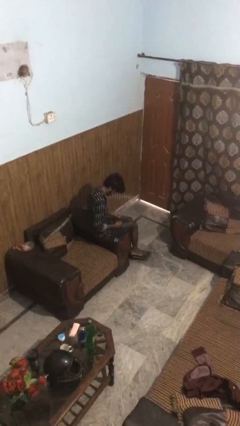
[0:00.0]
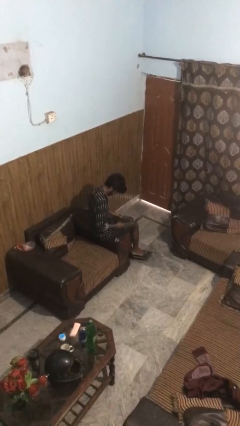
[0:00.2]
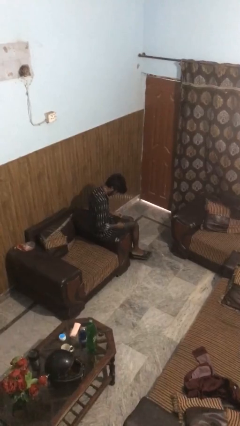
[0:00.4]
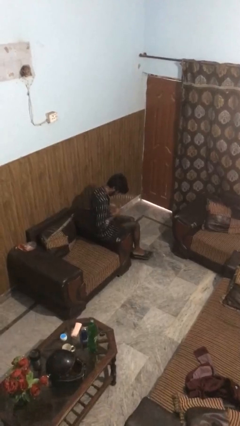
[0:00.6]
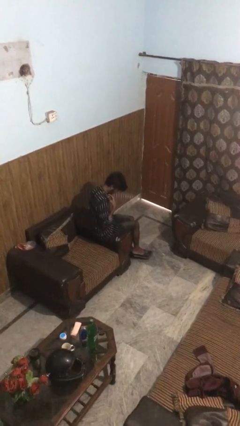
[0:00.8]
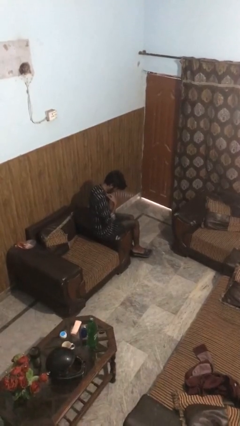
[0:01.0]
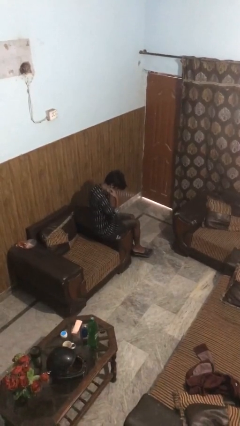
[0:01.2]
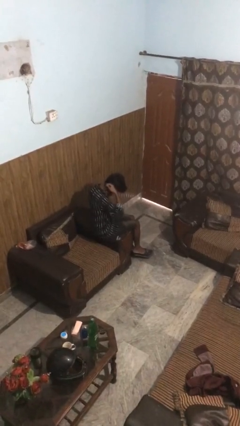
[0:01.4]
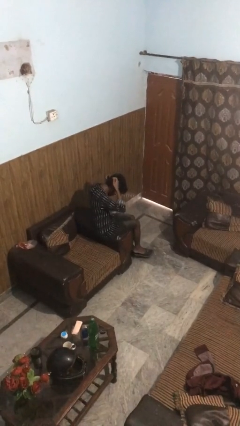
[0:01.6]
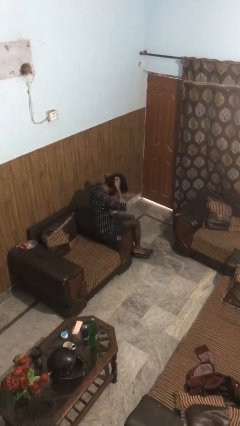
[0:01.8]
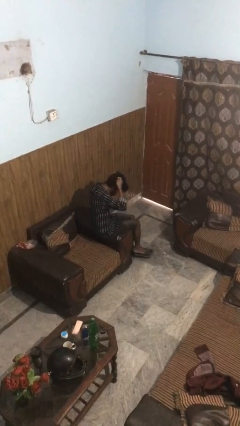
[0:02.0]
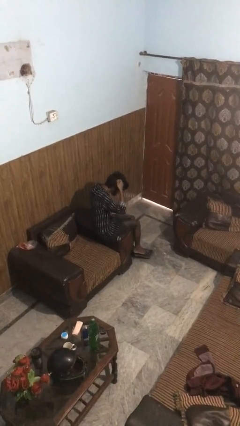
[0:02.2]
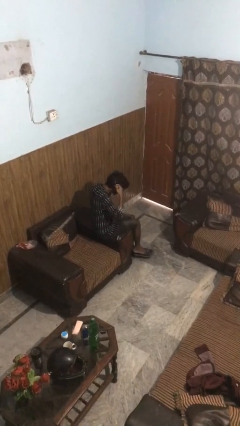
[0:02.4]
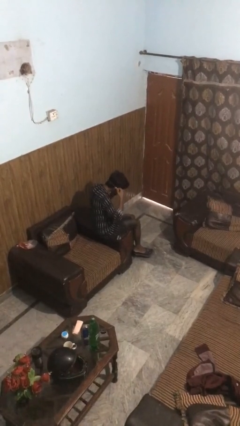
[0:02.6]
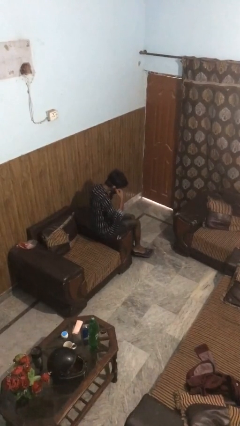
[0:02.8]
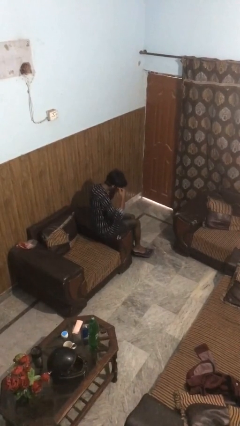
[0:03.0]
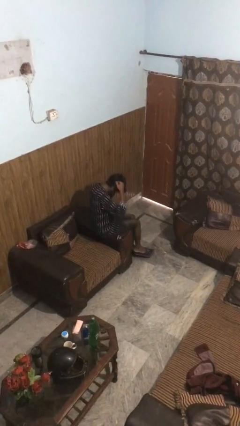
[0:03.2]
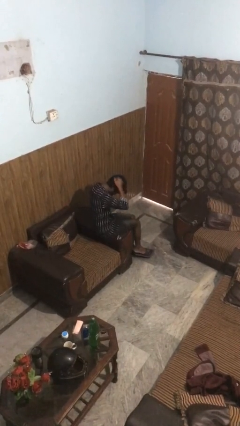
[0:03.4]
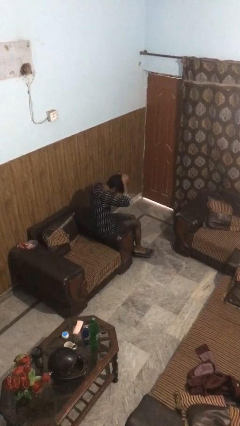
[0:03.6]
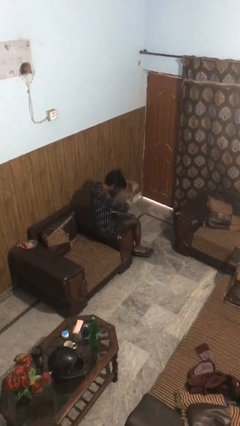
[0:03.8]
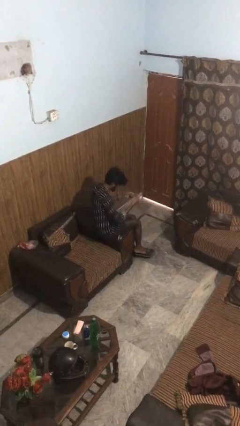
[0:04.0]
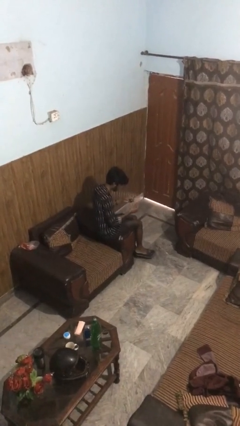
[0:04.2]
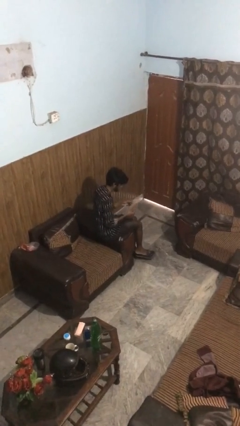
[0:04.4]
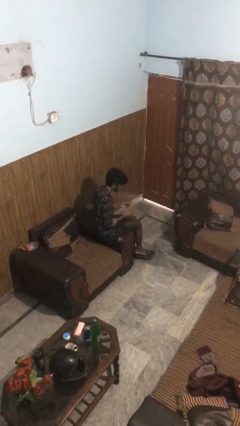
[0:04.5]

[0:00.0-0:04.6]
person takes off necklace

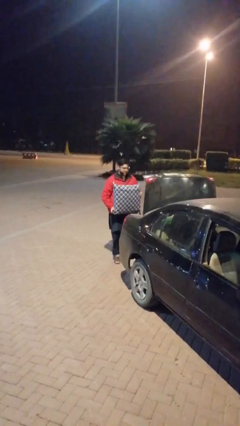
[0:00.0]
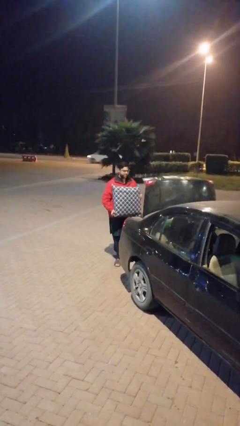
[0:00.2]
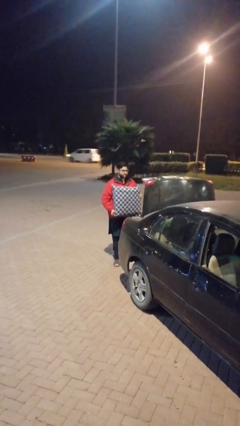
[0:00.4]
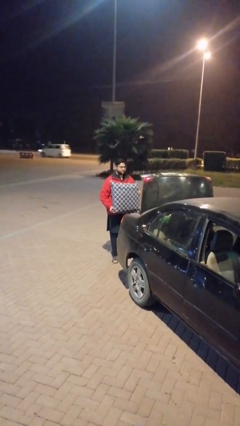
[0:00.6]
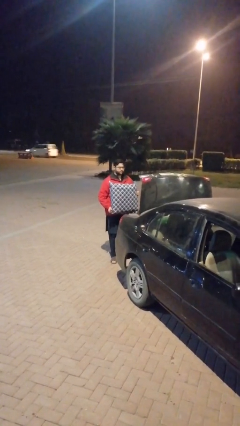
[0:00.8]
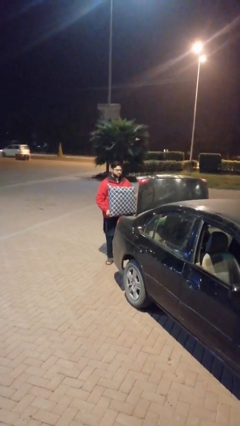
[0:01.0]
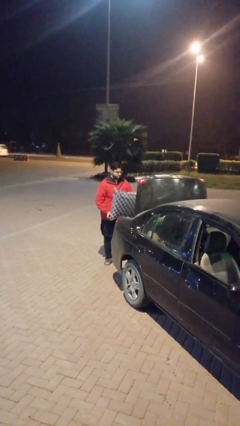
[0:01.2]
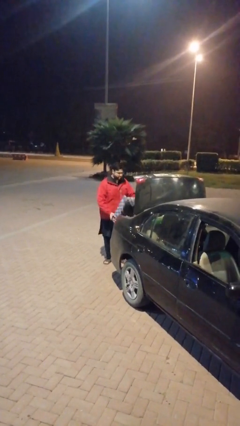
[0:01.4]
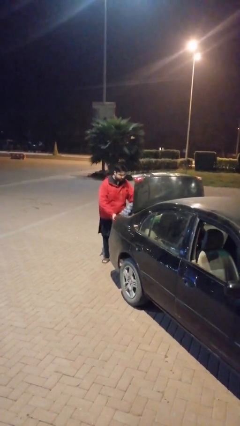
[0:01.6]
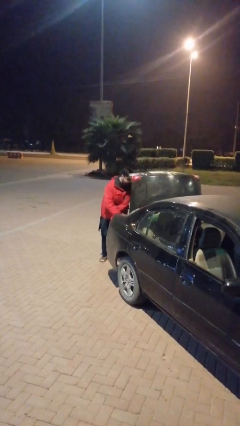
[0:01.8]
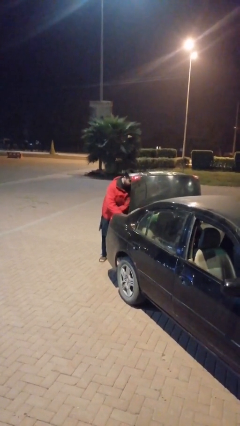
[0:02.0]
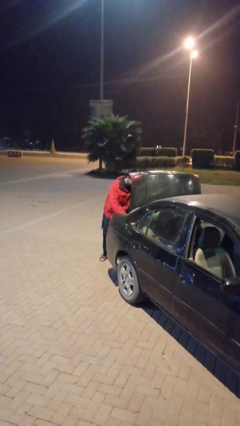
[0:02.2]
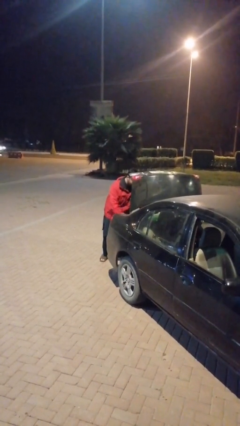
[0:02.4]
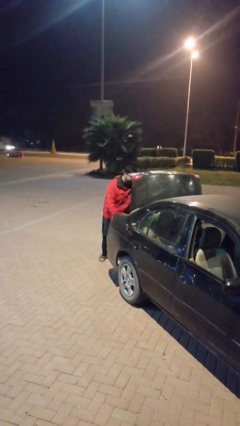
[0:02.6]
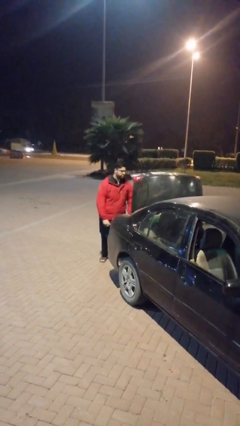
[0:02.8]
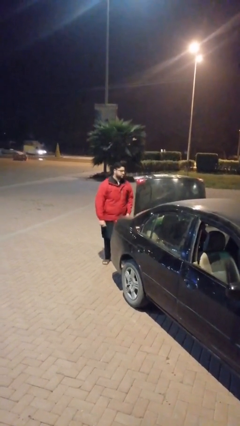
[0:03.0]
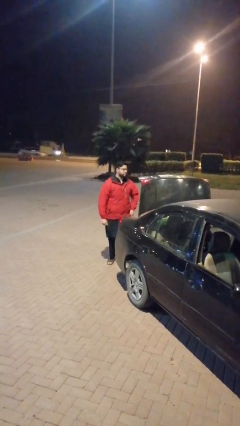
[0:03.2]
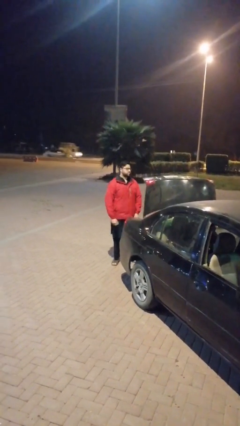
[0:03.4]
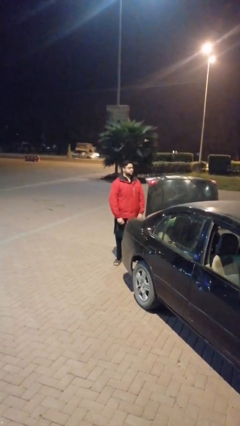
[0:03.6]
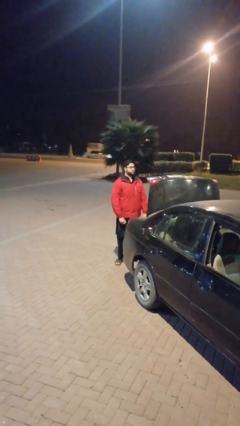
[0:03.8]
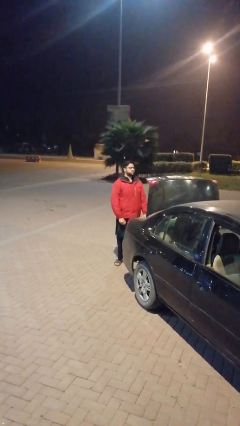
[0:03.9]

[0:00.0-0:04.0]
person loads car

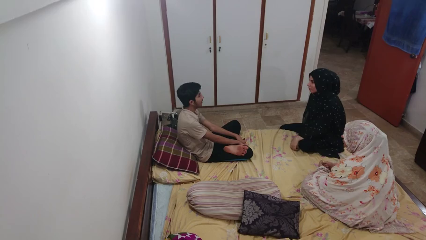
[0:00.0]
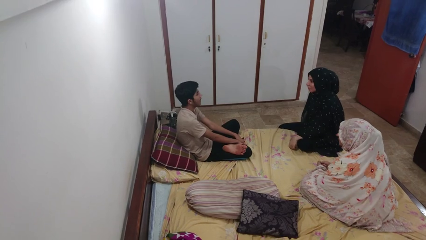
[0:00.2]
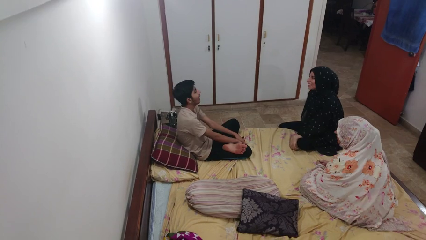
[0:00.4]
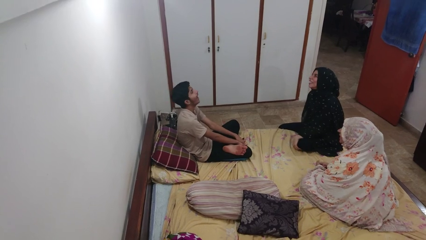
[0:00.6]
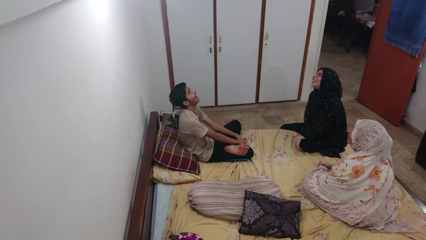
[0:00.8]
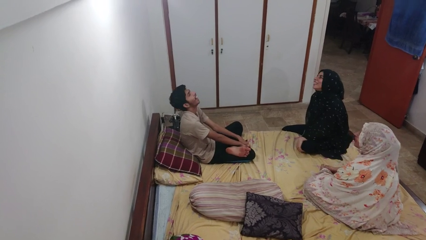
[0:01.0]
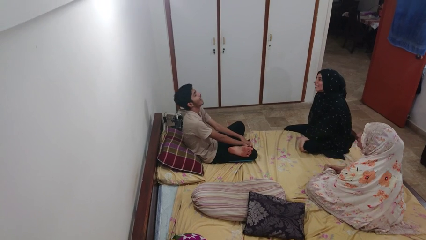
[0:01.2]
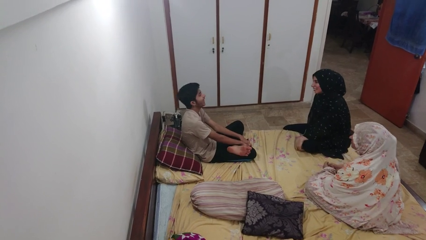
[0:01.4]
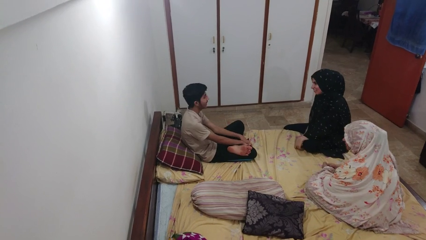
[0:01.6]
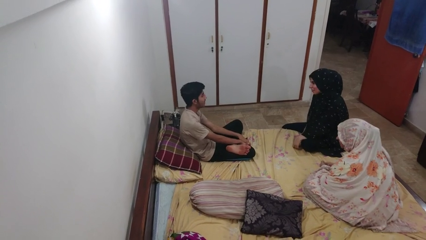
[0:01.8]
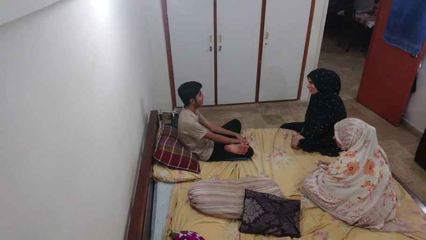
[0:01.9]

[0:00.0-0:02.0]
person laughs with person

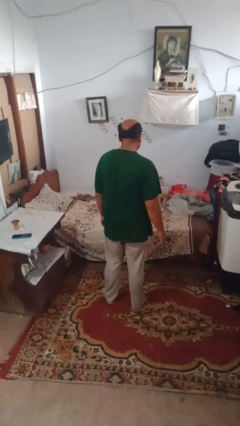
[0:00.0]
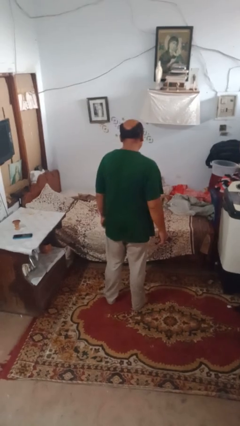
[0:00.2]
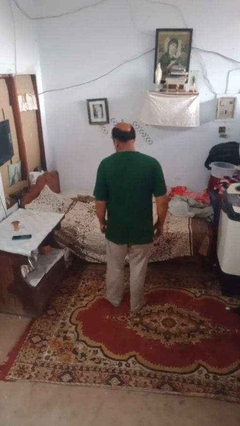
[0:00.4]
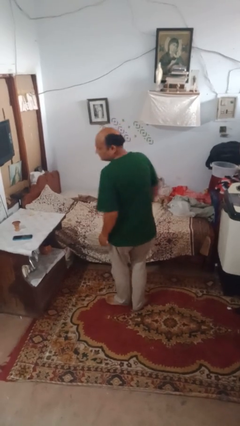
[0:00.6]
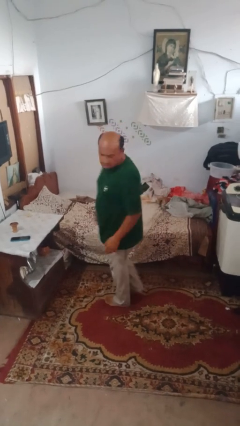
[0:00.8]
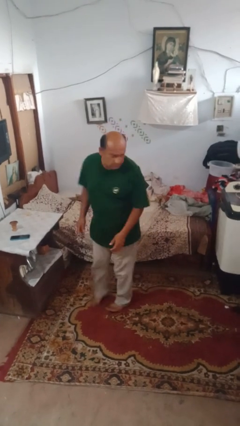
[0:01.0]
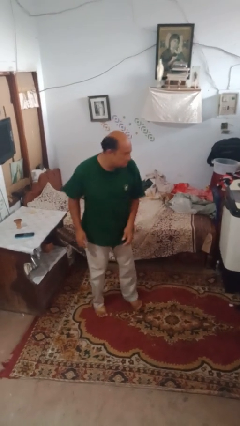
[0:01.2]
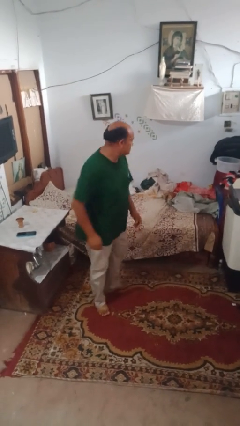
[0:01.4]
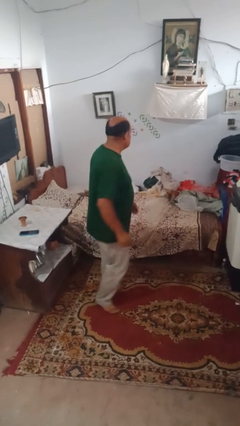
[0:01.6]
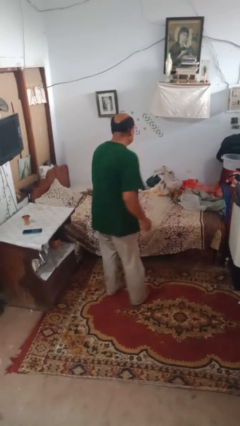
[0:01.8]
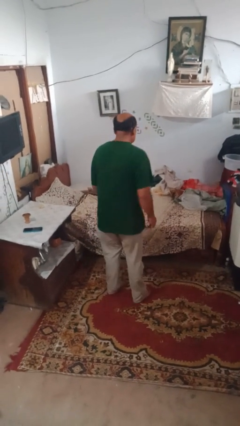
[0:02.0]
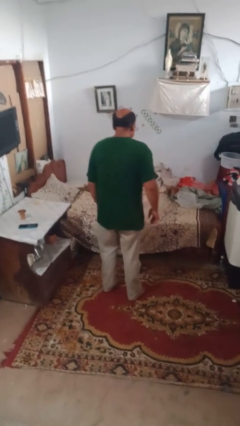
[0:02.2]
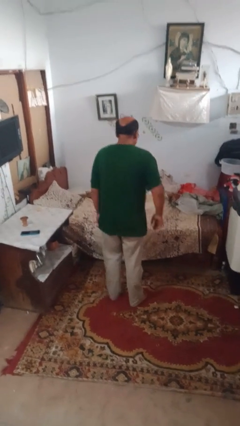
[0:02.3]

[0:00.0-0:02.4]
person twirls

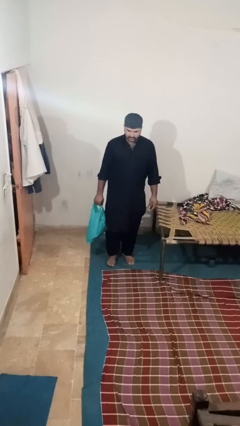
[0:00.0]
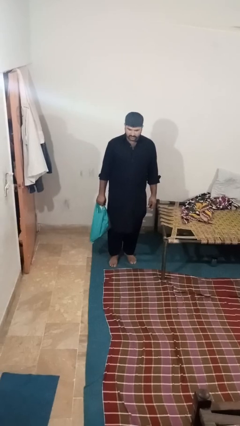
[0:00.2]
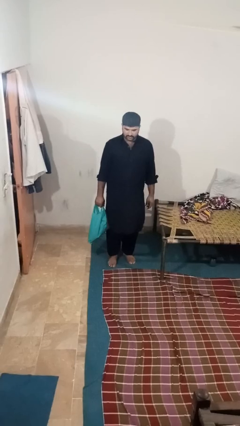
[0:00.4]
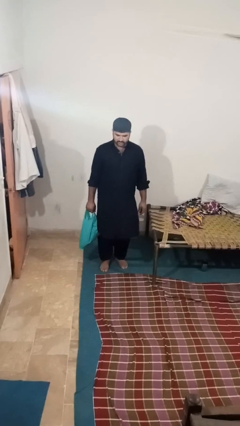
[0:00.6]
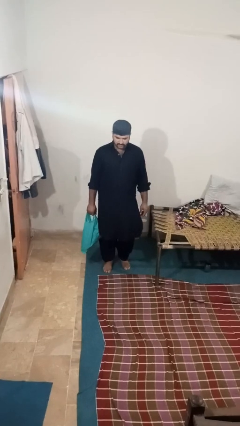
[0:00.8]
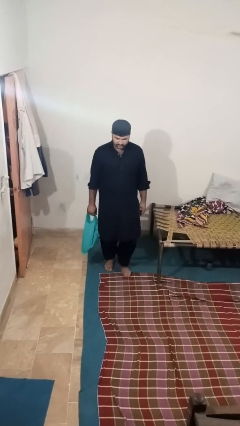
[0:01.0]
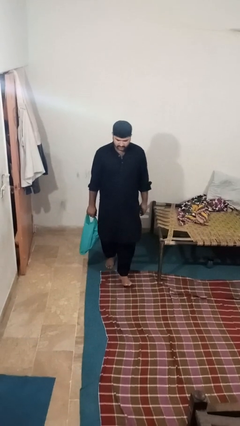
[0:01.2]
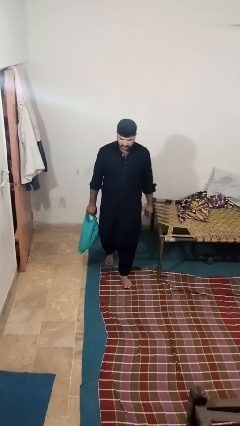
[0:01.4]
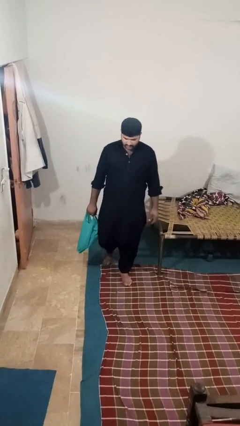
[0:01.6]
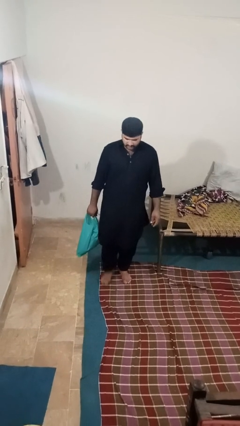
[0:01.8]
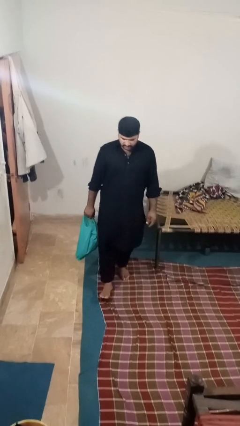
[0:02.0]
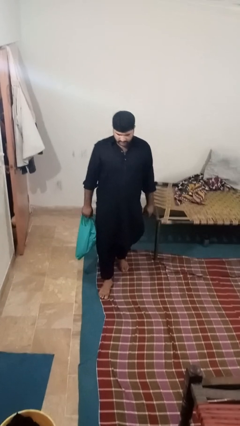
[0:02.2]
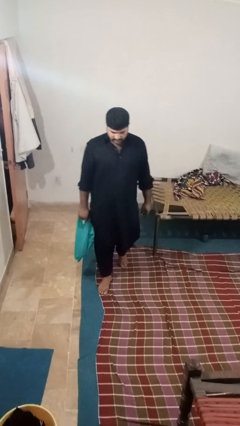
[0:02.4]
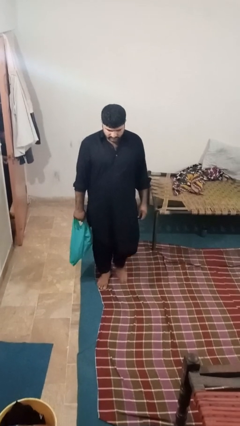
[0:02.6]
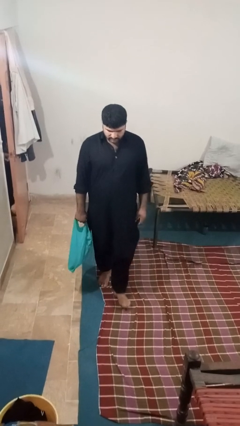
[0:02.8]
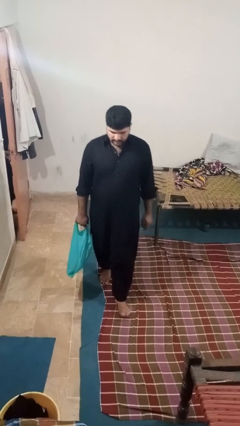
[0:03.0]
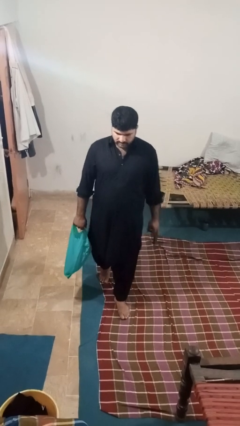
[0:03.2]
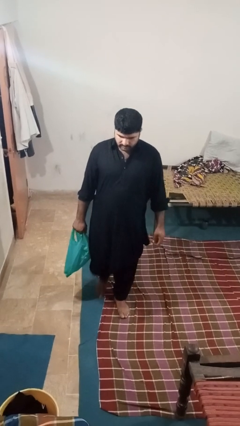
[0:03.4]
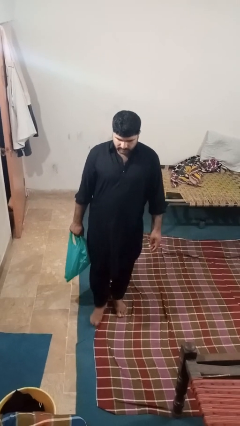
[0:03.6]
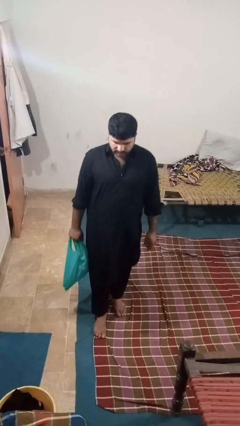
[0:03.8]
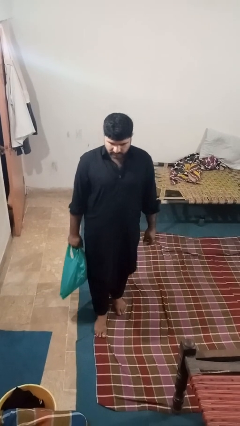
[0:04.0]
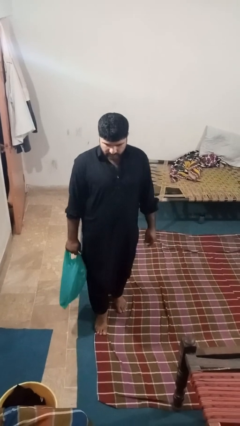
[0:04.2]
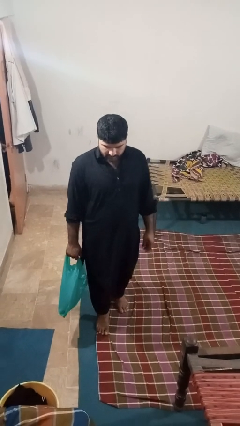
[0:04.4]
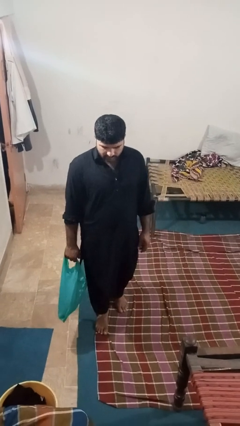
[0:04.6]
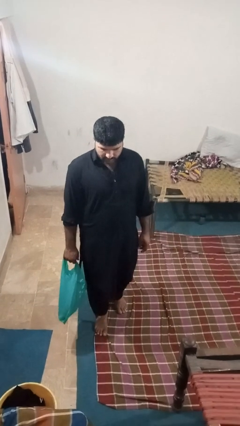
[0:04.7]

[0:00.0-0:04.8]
person carries groceries
